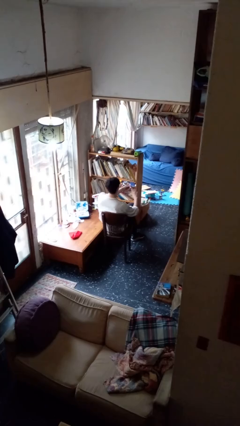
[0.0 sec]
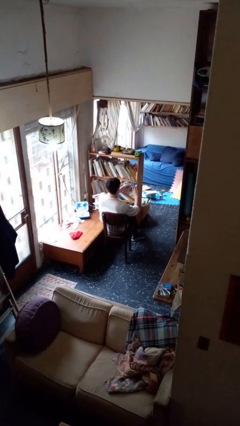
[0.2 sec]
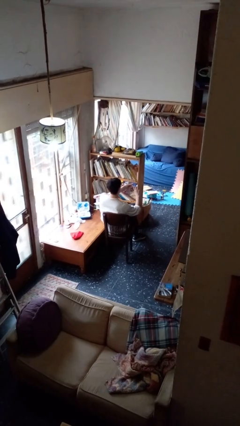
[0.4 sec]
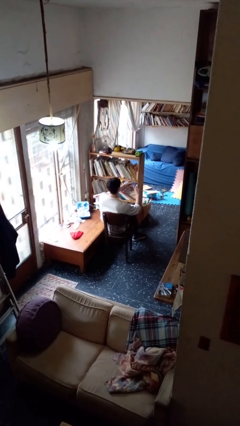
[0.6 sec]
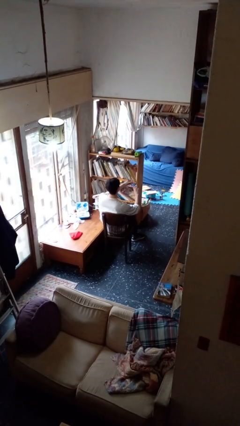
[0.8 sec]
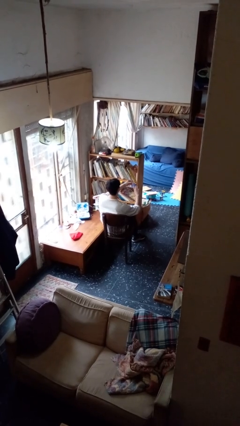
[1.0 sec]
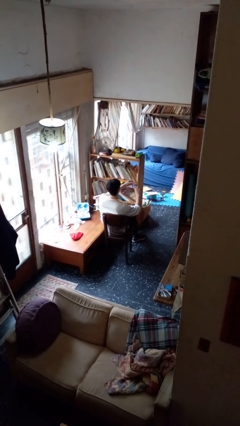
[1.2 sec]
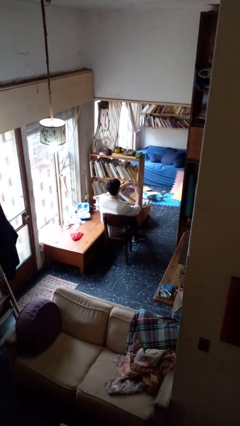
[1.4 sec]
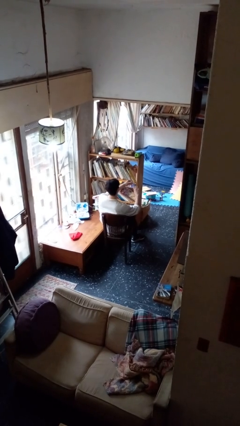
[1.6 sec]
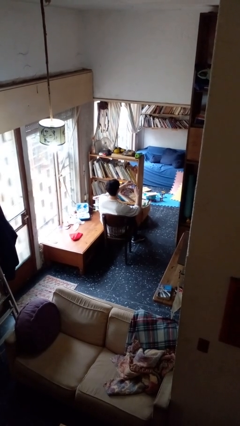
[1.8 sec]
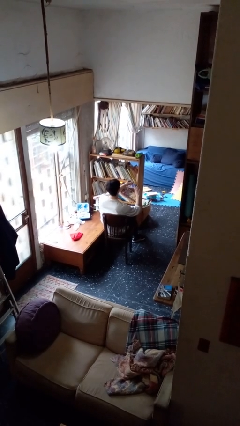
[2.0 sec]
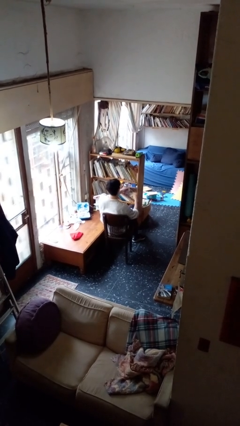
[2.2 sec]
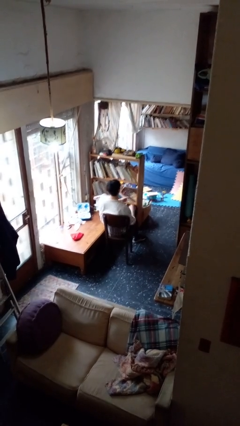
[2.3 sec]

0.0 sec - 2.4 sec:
person clips fingernails

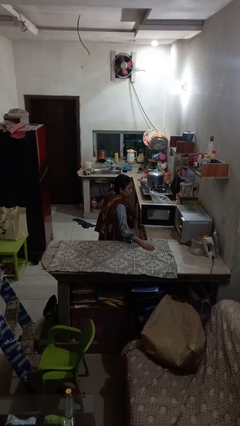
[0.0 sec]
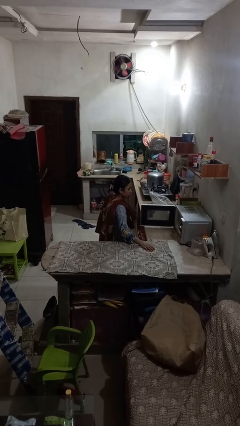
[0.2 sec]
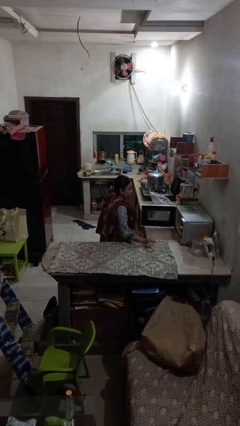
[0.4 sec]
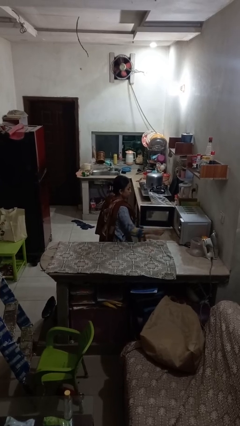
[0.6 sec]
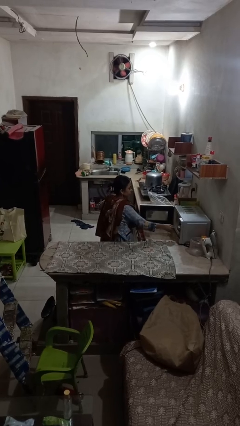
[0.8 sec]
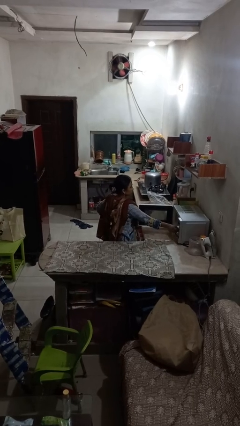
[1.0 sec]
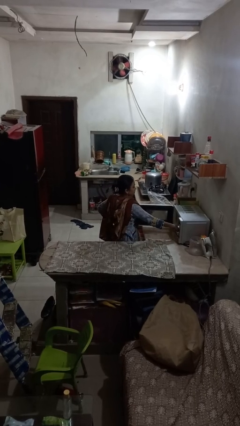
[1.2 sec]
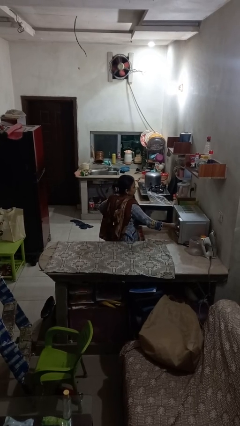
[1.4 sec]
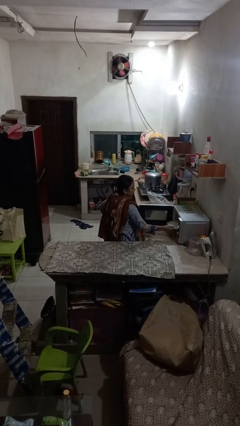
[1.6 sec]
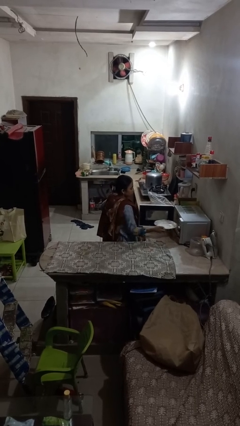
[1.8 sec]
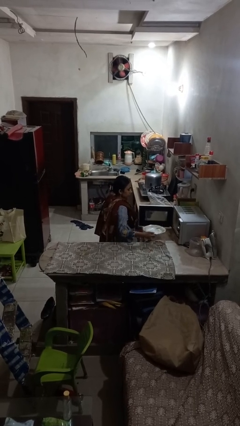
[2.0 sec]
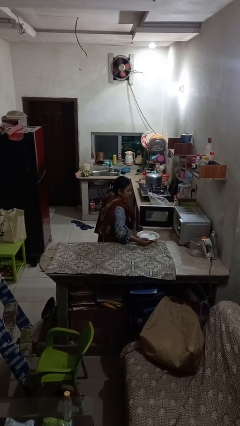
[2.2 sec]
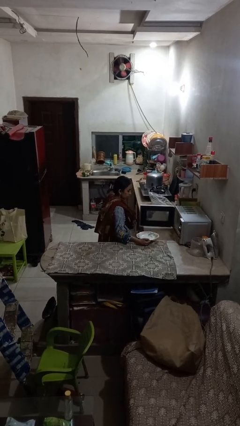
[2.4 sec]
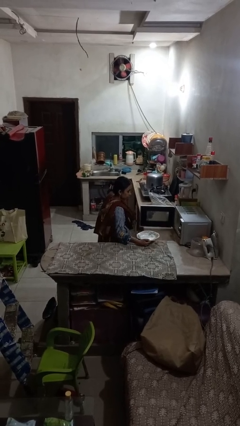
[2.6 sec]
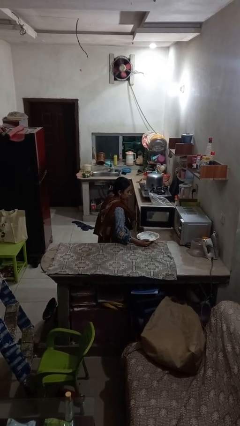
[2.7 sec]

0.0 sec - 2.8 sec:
person takes object from microwave

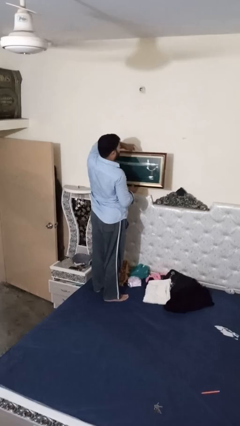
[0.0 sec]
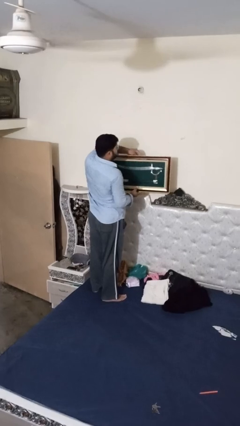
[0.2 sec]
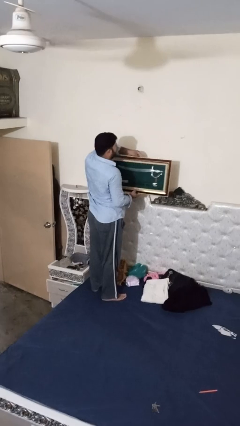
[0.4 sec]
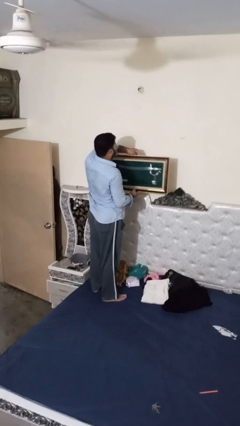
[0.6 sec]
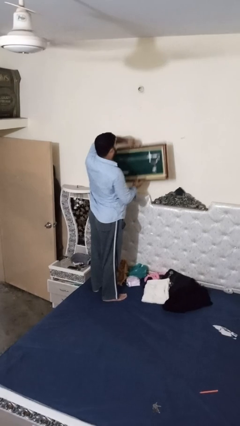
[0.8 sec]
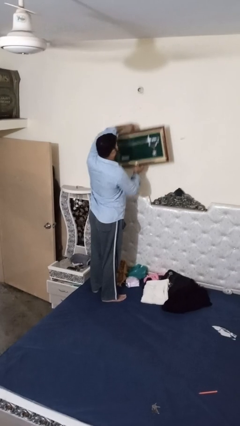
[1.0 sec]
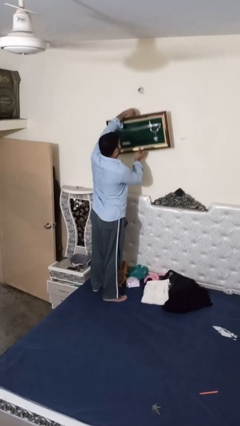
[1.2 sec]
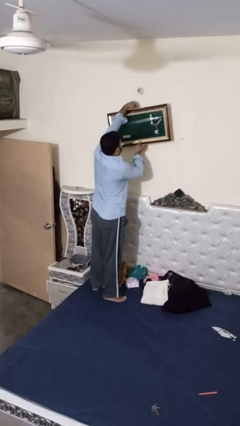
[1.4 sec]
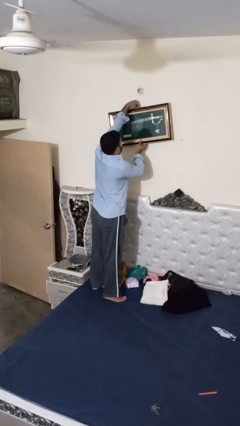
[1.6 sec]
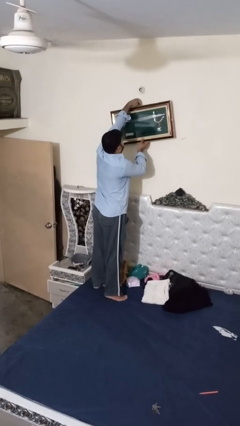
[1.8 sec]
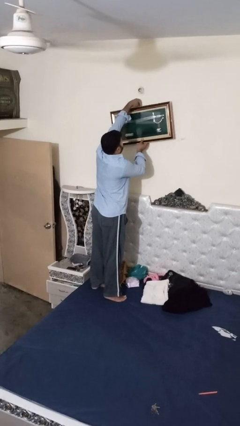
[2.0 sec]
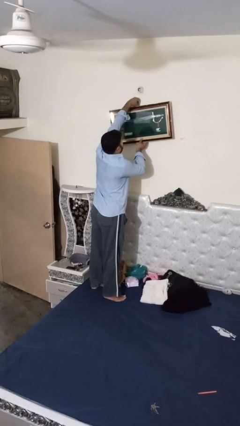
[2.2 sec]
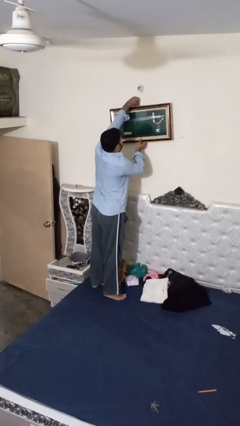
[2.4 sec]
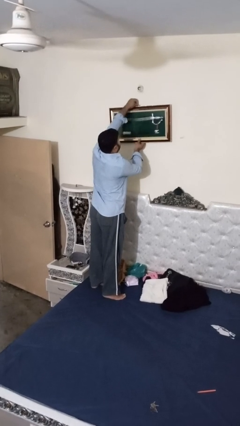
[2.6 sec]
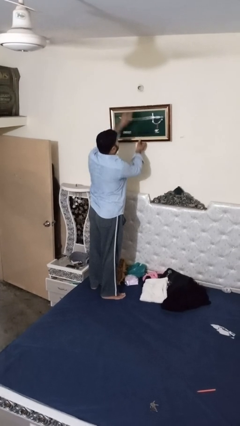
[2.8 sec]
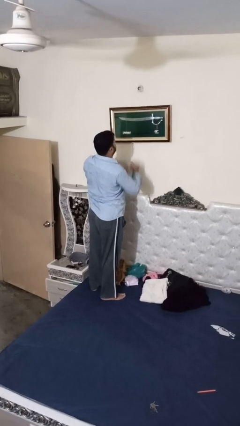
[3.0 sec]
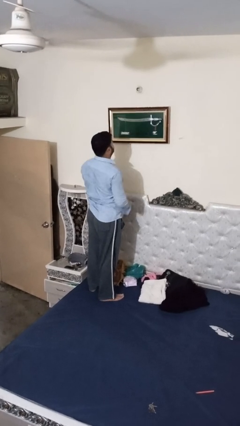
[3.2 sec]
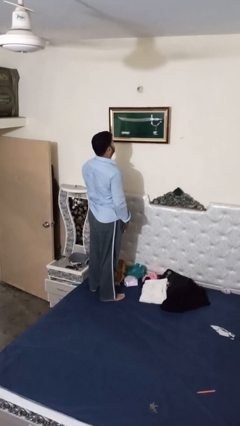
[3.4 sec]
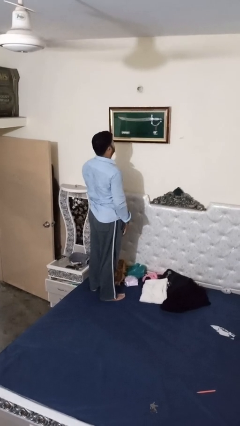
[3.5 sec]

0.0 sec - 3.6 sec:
person puts up picture frame

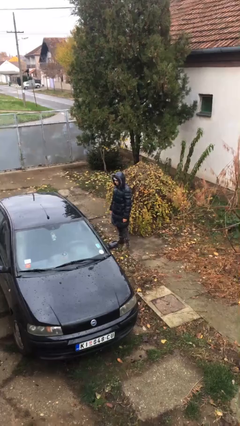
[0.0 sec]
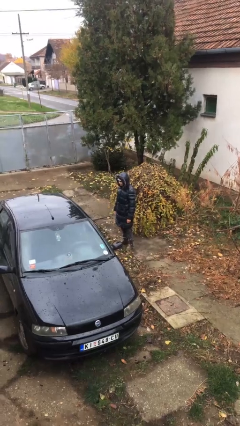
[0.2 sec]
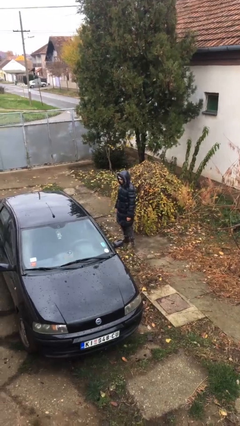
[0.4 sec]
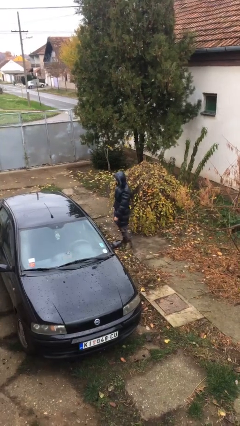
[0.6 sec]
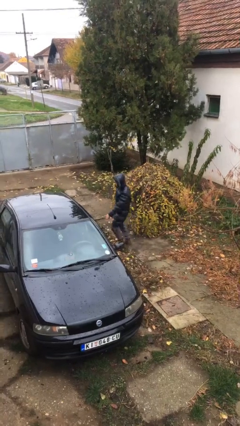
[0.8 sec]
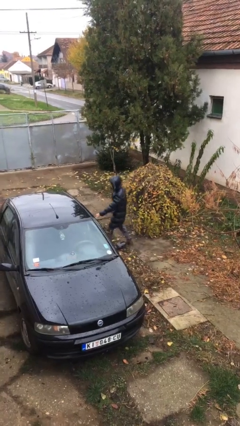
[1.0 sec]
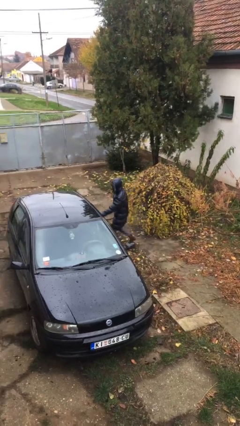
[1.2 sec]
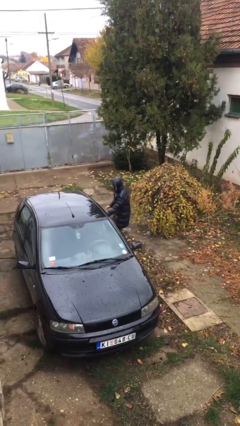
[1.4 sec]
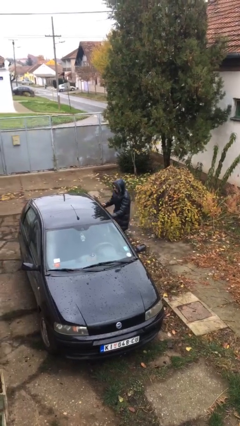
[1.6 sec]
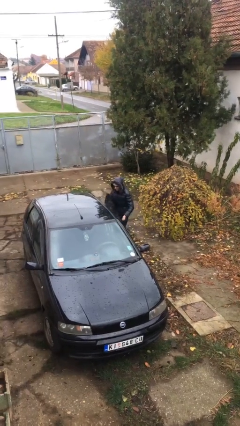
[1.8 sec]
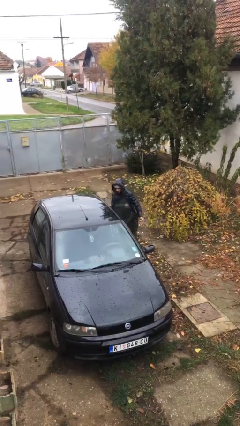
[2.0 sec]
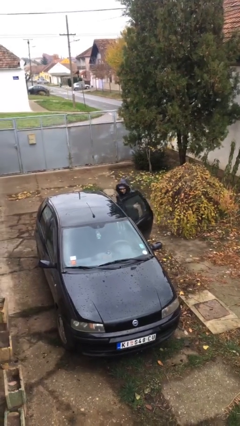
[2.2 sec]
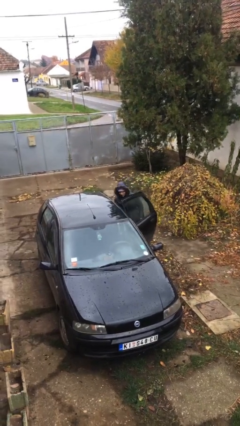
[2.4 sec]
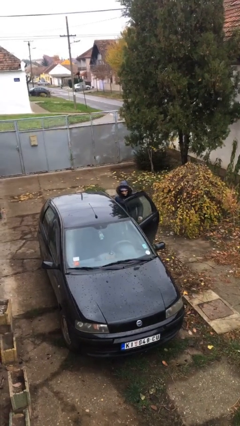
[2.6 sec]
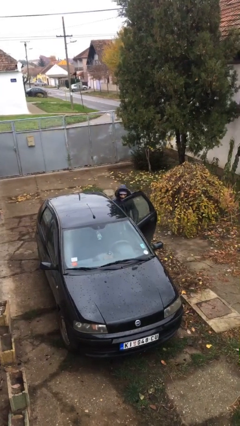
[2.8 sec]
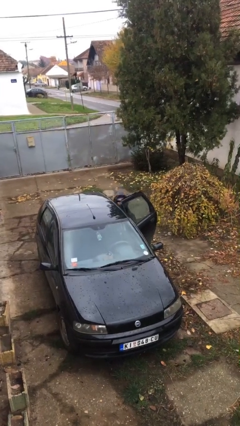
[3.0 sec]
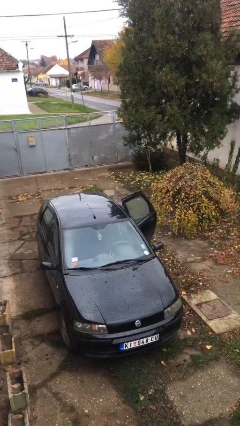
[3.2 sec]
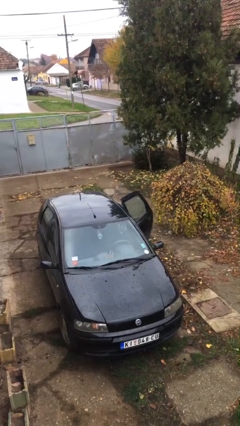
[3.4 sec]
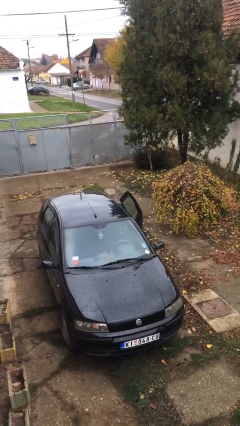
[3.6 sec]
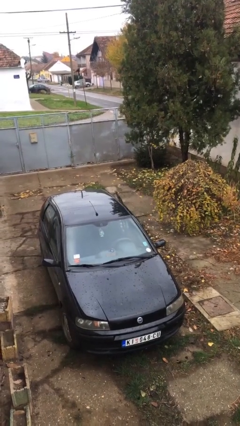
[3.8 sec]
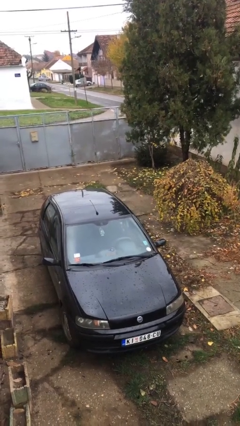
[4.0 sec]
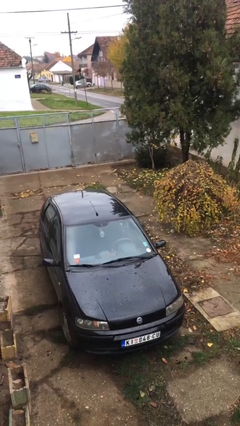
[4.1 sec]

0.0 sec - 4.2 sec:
person enters car

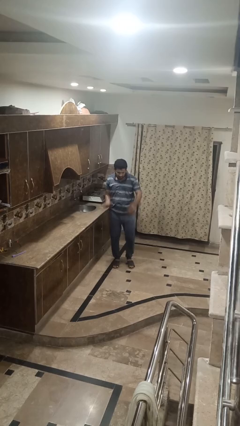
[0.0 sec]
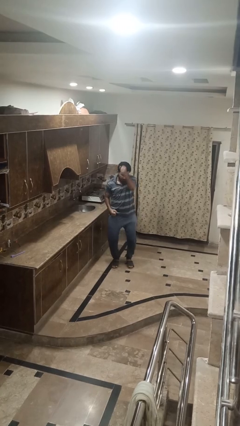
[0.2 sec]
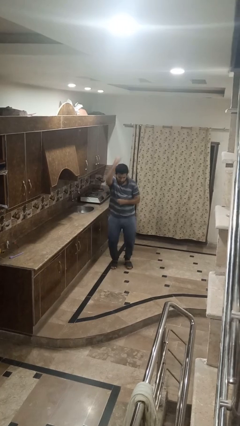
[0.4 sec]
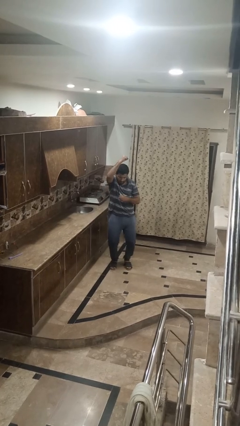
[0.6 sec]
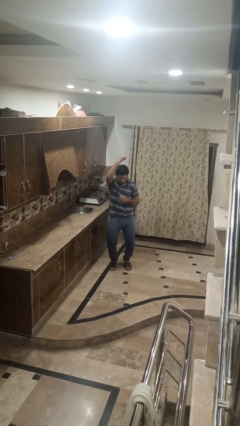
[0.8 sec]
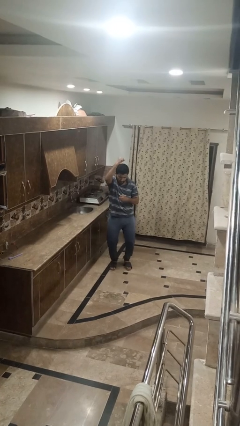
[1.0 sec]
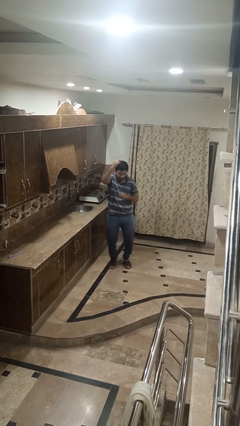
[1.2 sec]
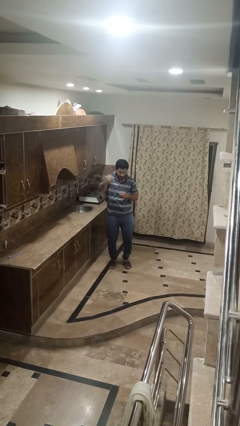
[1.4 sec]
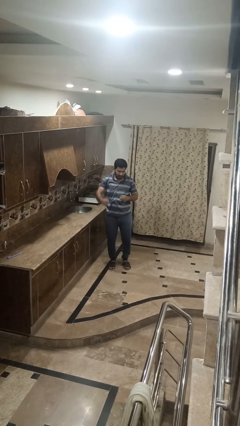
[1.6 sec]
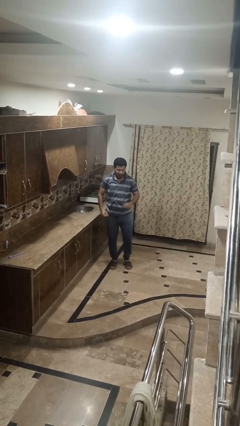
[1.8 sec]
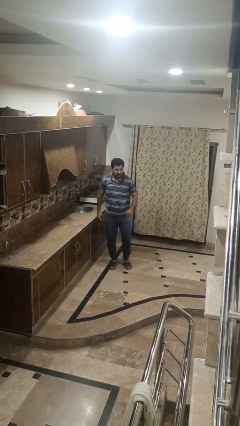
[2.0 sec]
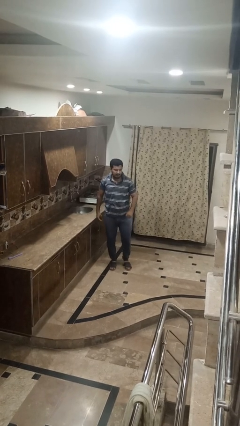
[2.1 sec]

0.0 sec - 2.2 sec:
person punches

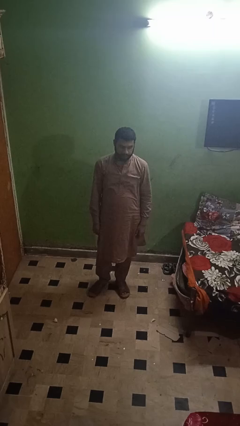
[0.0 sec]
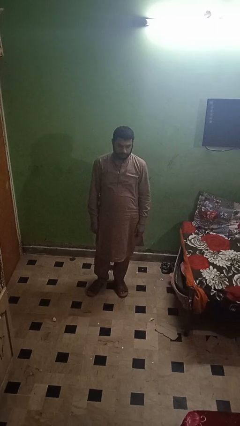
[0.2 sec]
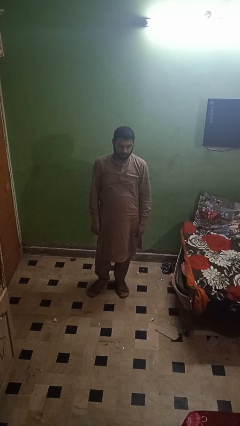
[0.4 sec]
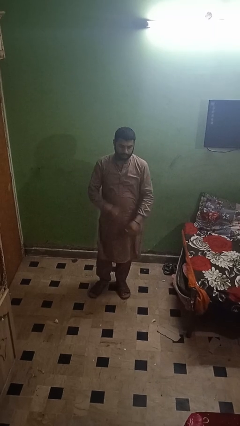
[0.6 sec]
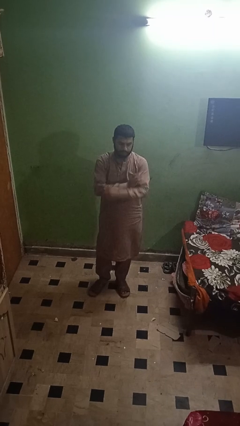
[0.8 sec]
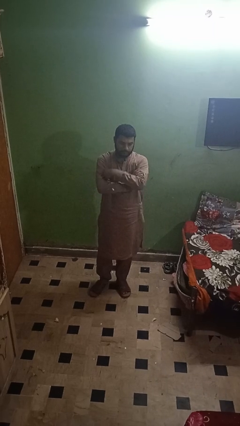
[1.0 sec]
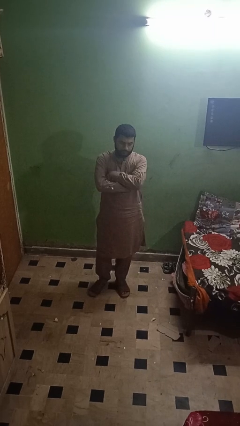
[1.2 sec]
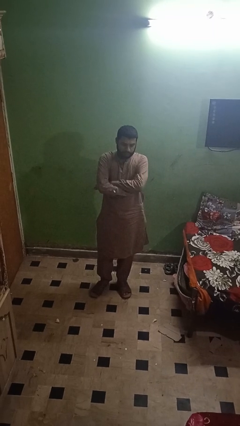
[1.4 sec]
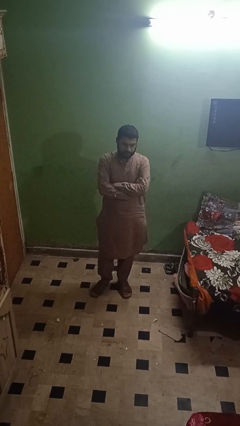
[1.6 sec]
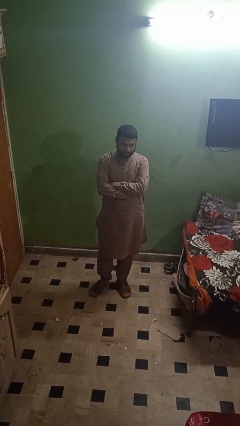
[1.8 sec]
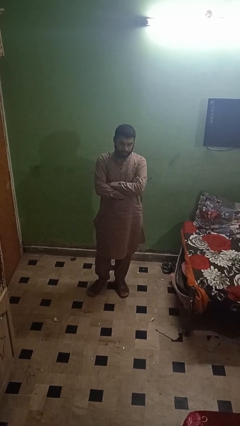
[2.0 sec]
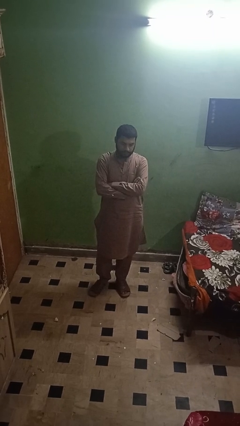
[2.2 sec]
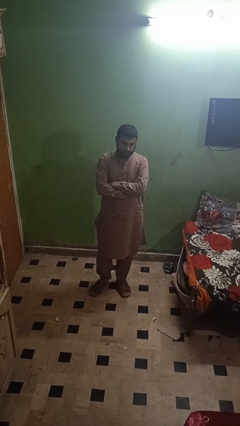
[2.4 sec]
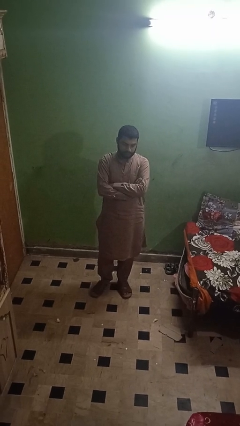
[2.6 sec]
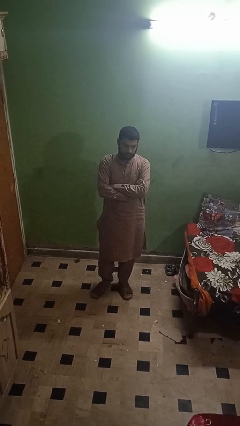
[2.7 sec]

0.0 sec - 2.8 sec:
person crosses arms
